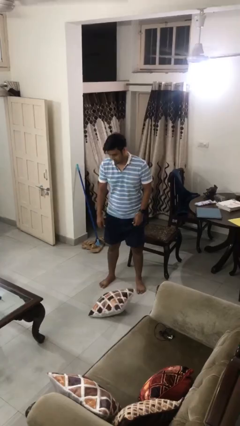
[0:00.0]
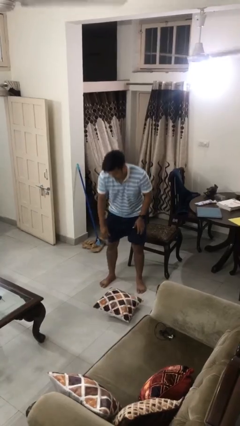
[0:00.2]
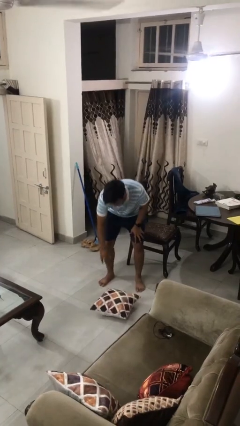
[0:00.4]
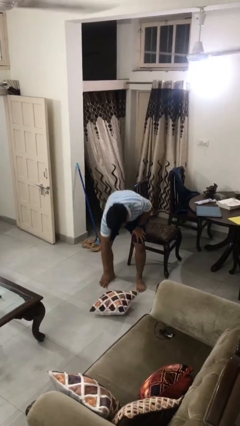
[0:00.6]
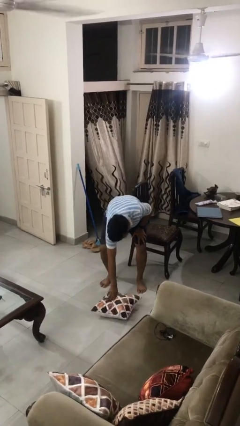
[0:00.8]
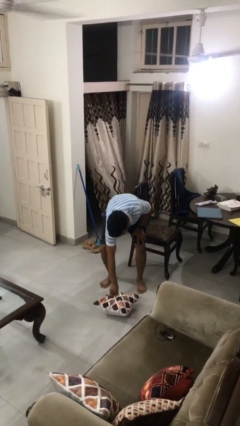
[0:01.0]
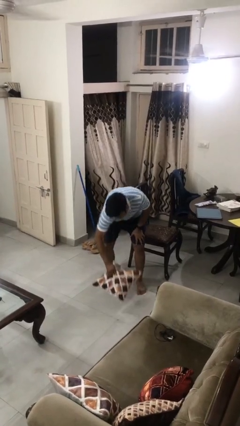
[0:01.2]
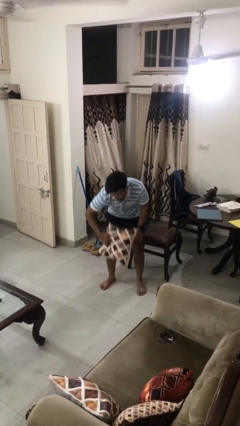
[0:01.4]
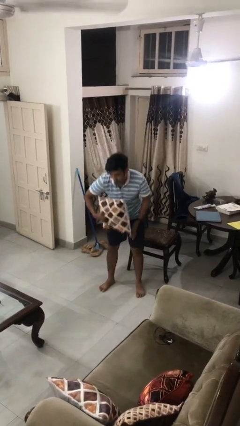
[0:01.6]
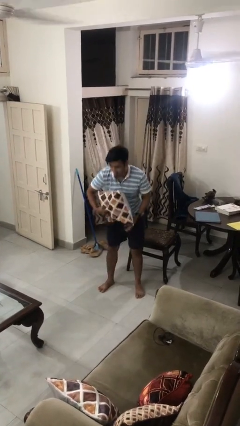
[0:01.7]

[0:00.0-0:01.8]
person picks up object from floor

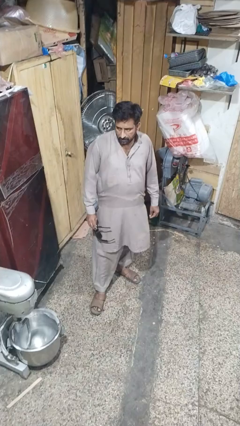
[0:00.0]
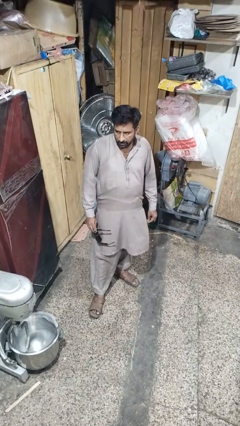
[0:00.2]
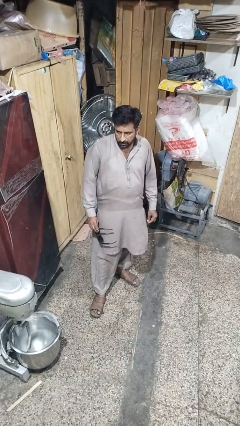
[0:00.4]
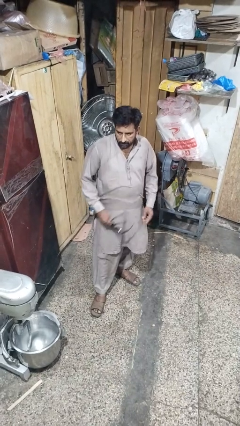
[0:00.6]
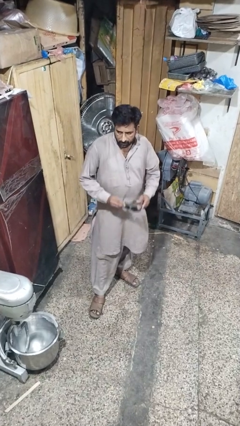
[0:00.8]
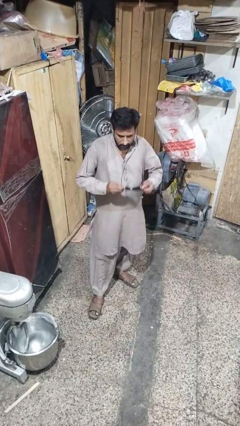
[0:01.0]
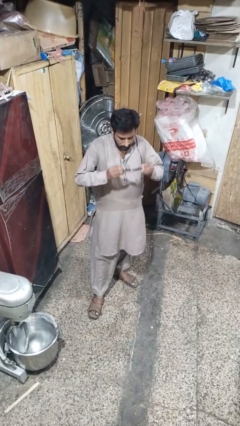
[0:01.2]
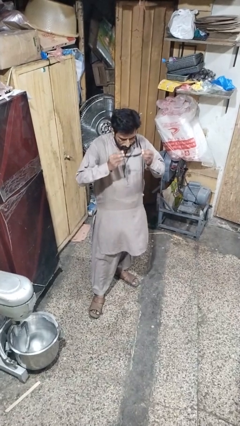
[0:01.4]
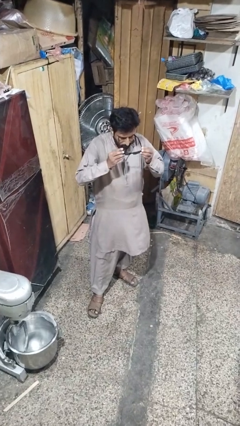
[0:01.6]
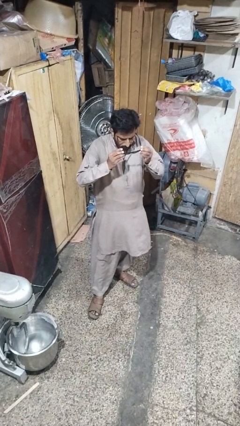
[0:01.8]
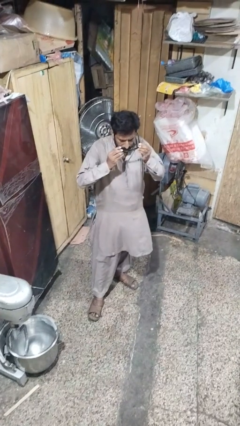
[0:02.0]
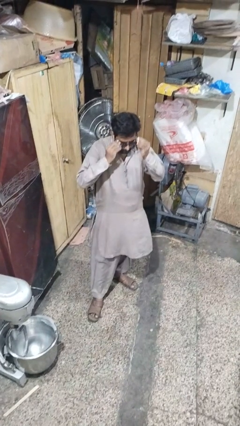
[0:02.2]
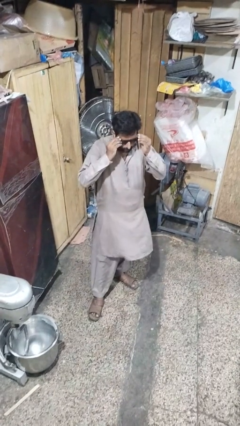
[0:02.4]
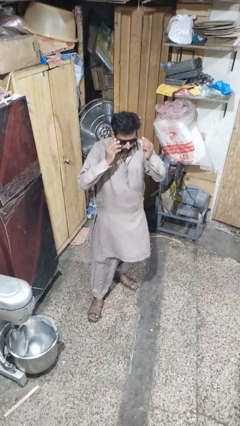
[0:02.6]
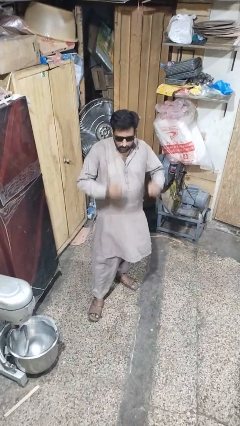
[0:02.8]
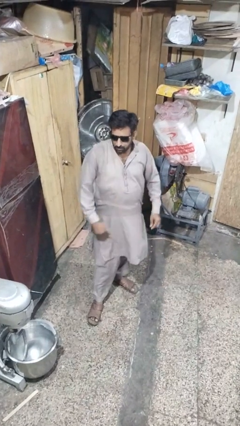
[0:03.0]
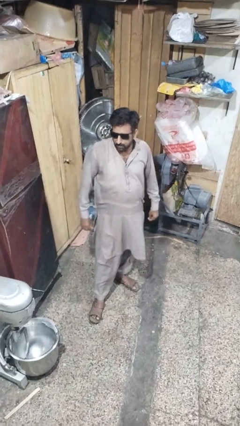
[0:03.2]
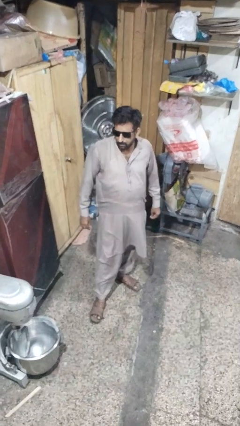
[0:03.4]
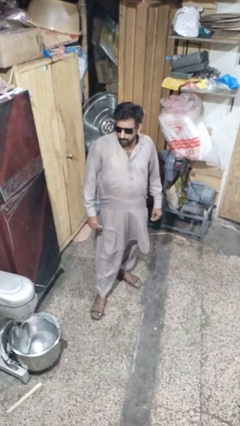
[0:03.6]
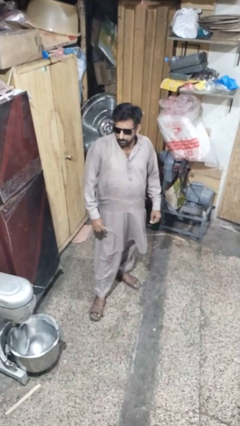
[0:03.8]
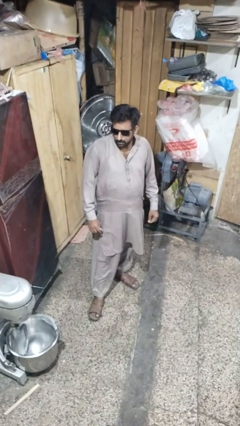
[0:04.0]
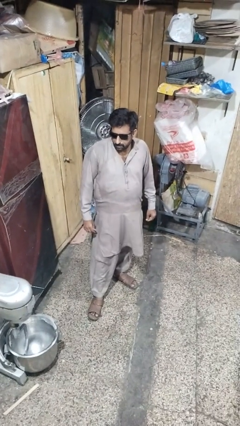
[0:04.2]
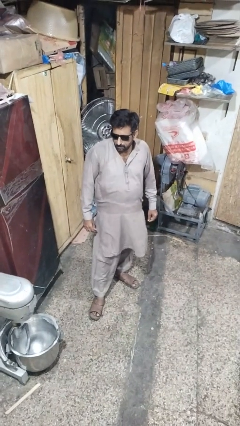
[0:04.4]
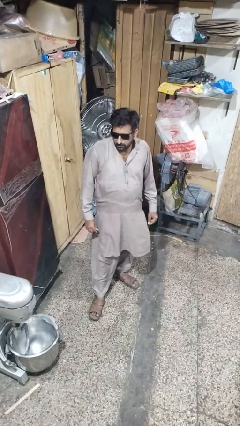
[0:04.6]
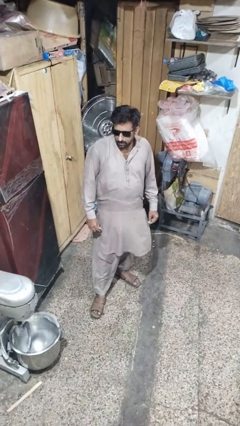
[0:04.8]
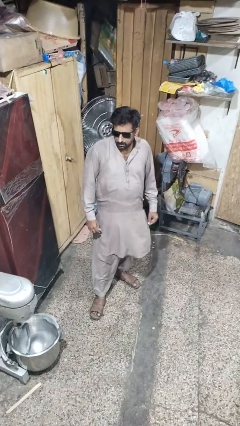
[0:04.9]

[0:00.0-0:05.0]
person puts on sunglasses

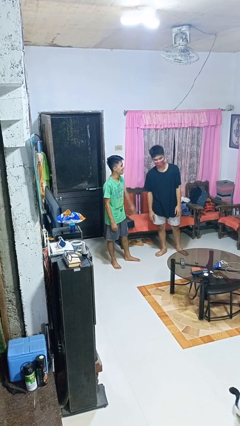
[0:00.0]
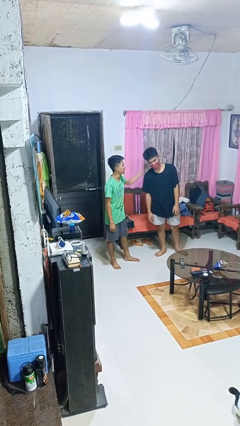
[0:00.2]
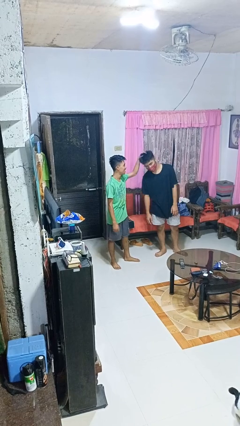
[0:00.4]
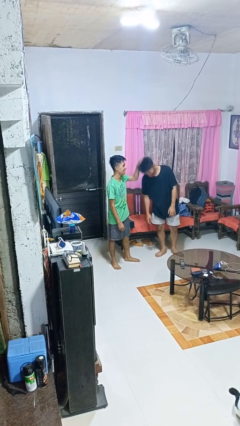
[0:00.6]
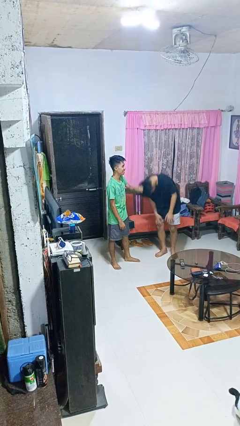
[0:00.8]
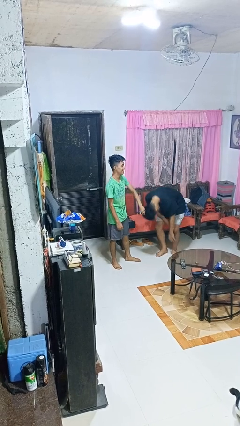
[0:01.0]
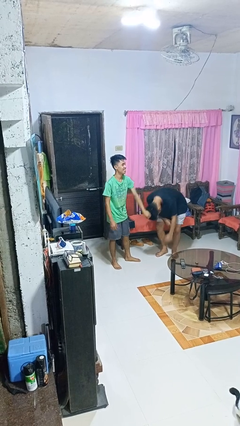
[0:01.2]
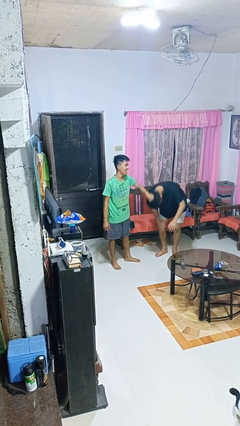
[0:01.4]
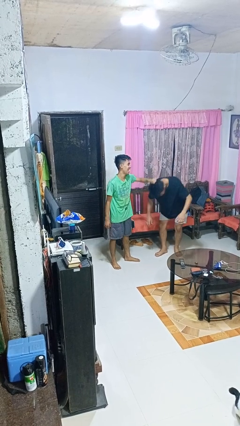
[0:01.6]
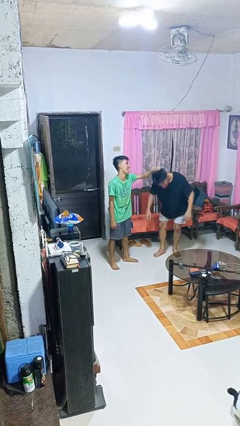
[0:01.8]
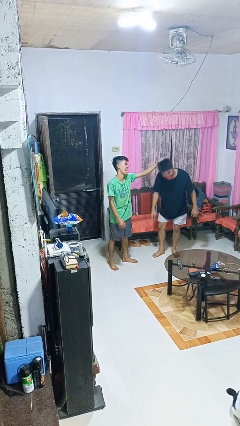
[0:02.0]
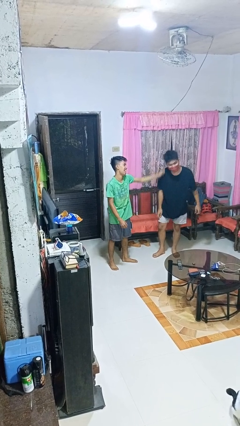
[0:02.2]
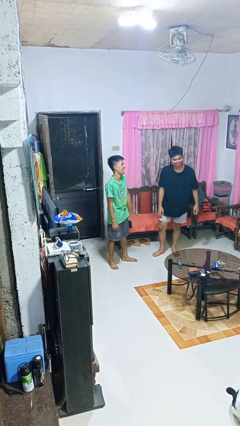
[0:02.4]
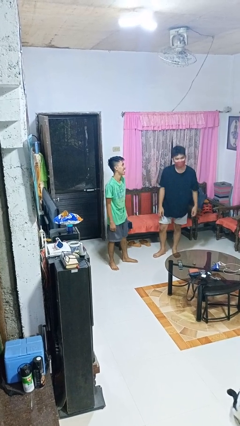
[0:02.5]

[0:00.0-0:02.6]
person grabs person by hair

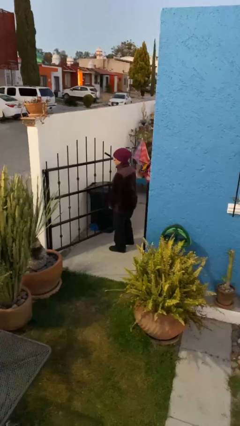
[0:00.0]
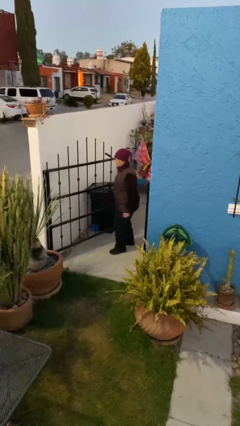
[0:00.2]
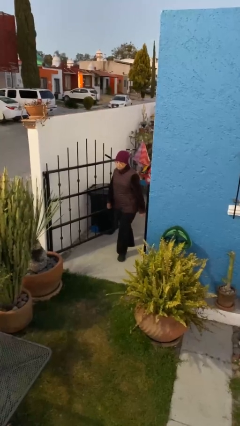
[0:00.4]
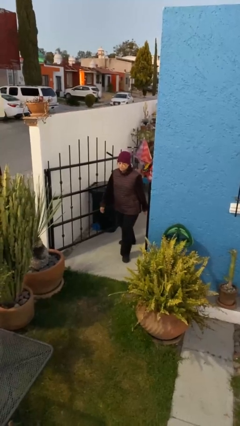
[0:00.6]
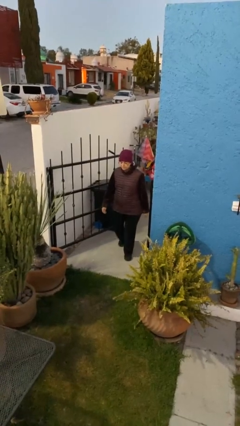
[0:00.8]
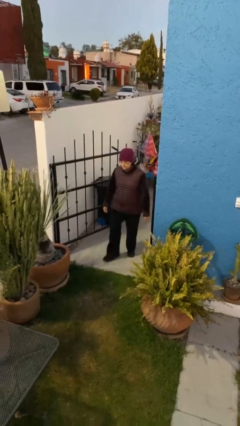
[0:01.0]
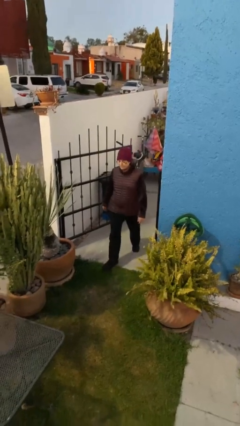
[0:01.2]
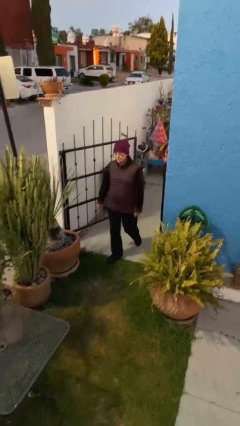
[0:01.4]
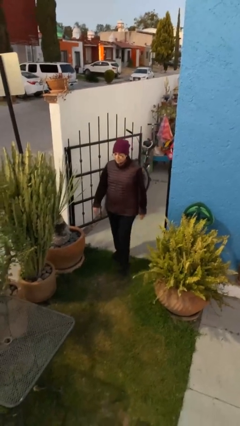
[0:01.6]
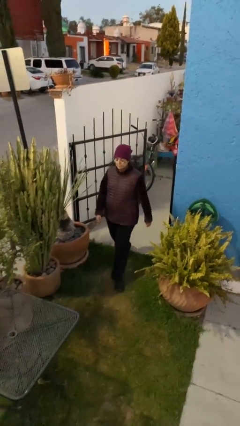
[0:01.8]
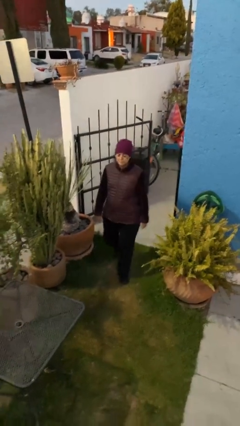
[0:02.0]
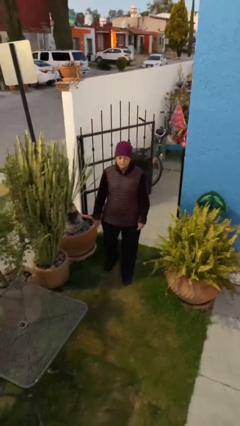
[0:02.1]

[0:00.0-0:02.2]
person exits scene through structure

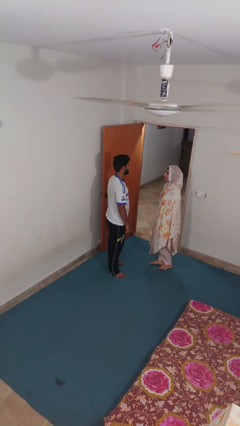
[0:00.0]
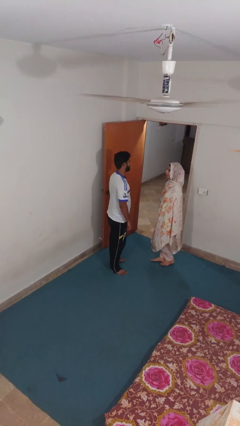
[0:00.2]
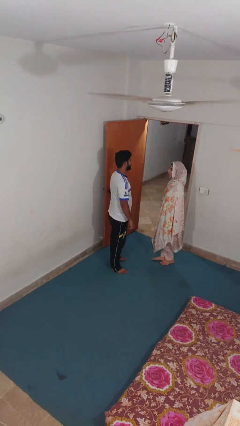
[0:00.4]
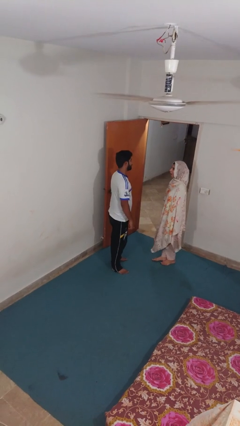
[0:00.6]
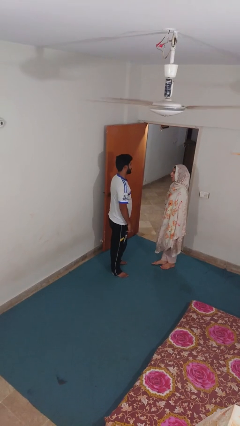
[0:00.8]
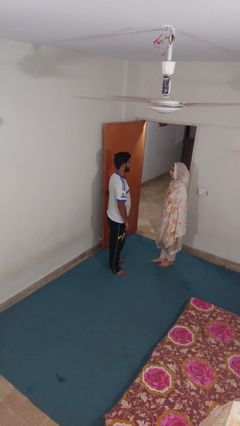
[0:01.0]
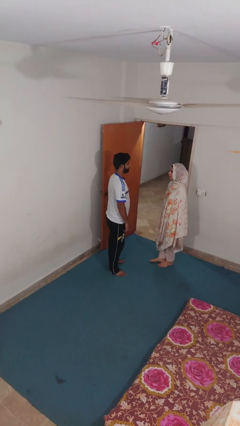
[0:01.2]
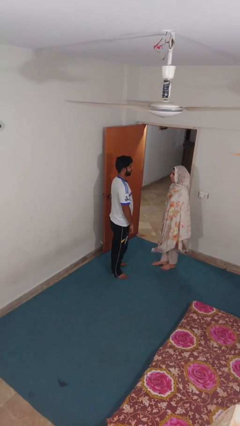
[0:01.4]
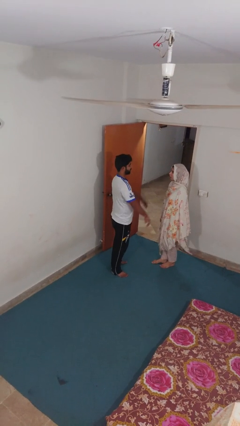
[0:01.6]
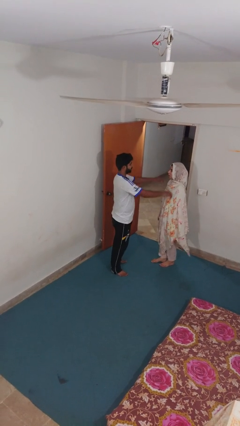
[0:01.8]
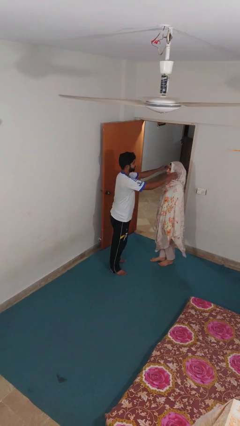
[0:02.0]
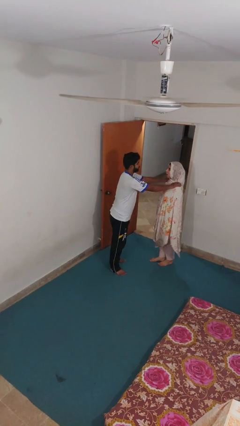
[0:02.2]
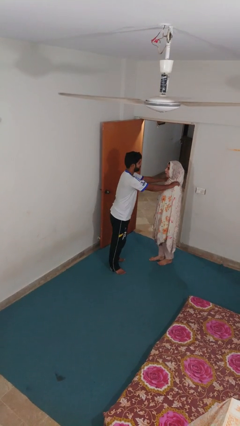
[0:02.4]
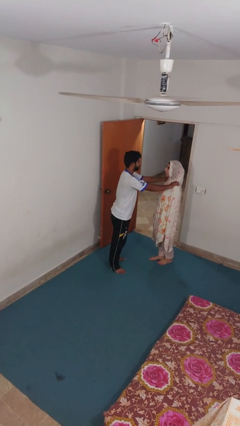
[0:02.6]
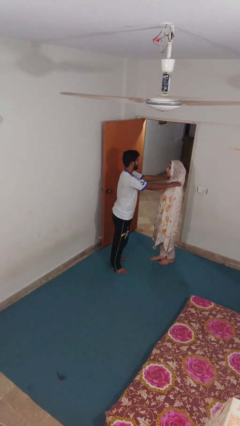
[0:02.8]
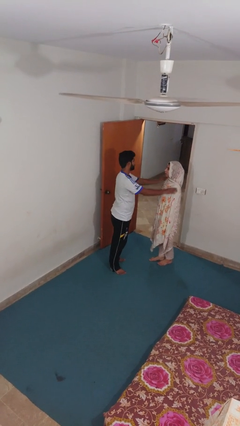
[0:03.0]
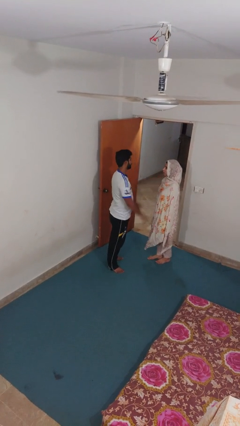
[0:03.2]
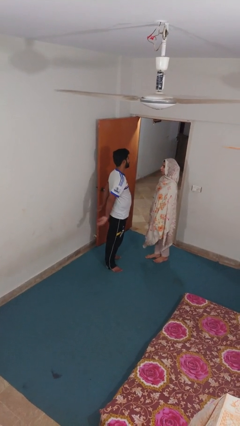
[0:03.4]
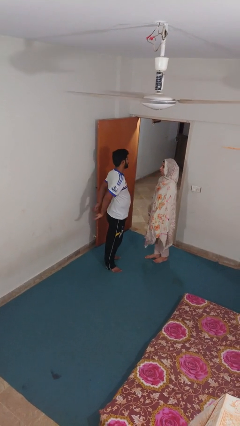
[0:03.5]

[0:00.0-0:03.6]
person pounds shoulders of person

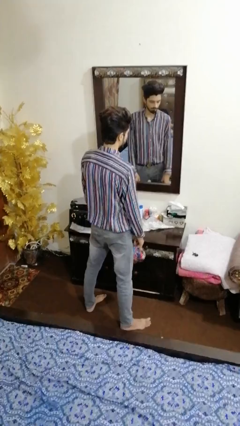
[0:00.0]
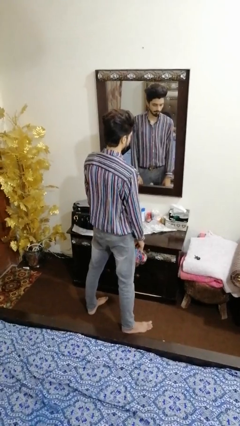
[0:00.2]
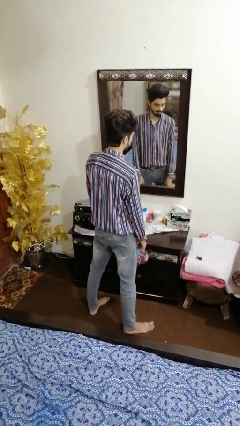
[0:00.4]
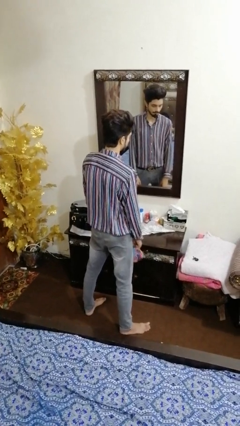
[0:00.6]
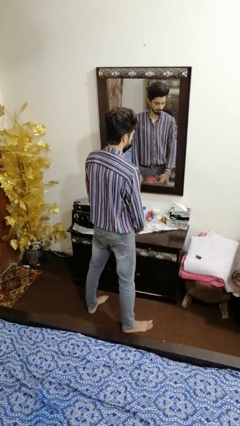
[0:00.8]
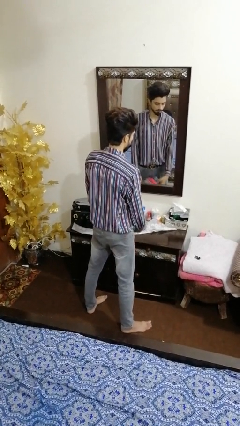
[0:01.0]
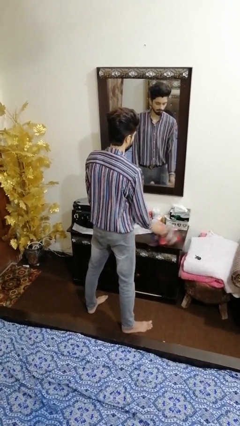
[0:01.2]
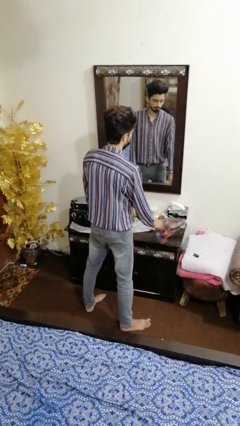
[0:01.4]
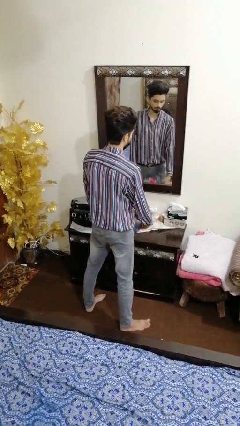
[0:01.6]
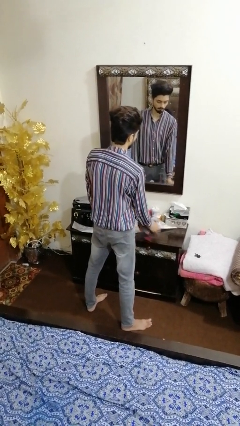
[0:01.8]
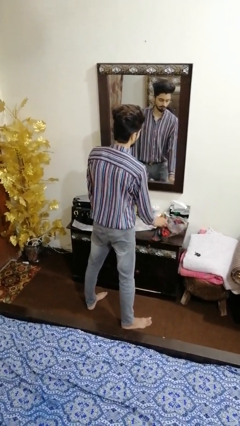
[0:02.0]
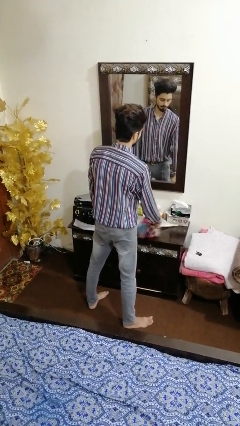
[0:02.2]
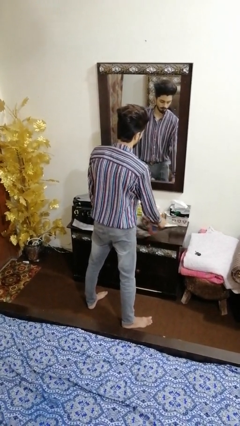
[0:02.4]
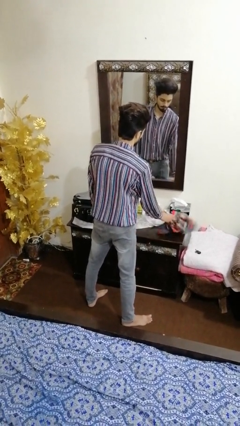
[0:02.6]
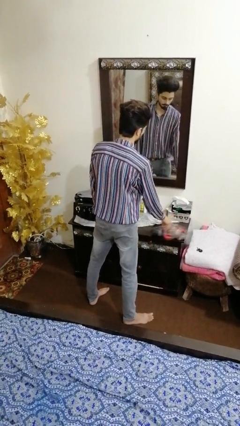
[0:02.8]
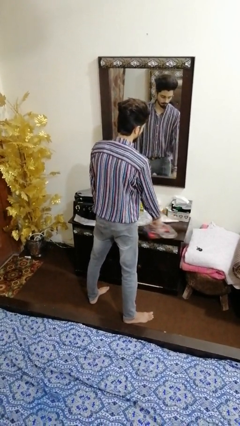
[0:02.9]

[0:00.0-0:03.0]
person cleans table with rag
